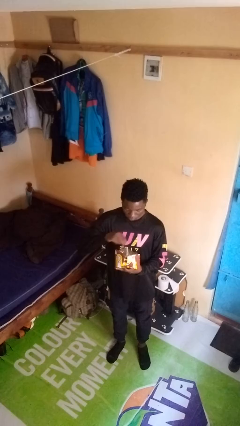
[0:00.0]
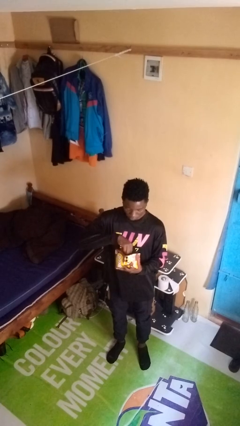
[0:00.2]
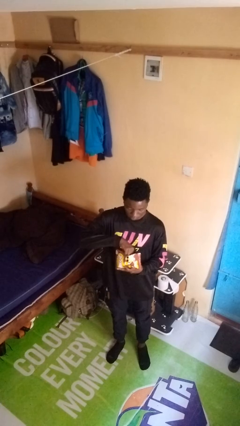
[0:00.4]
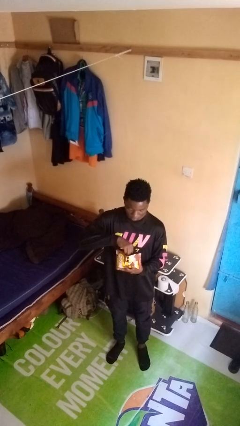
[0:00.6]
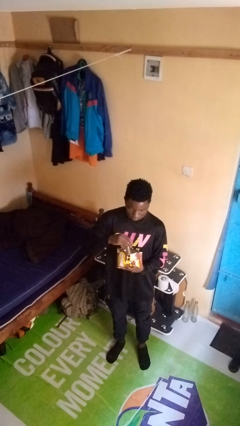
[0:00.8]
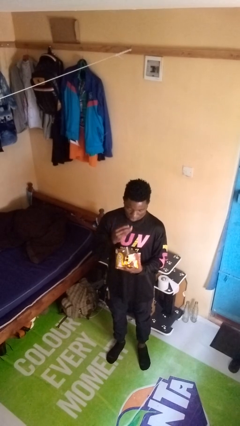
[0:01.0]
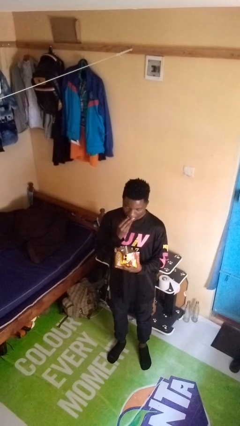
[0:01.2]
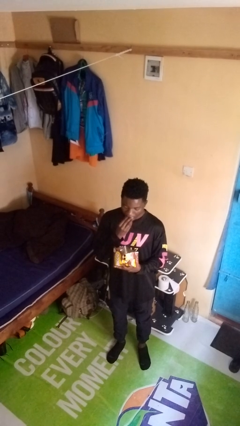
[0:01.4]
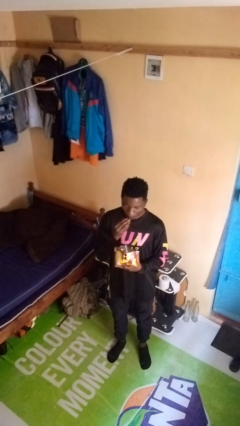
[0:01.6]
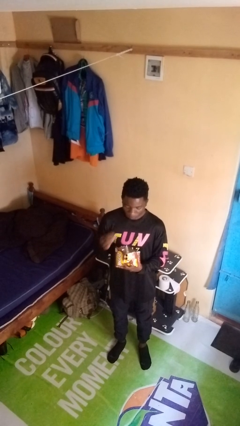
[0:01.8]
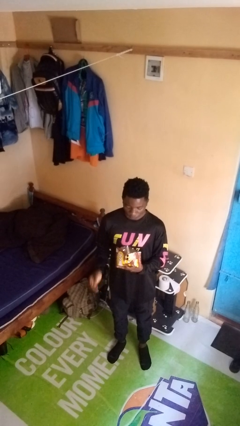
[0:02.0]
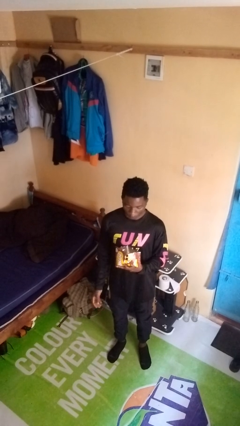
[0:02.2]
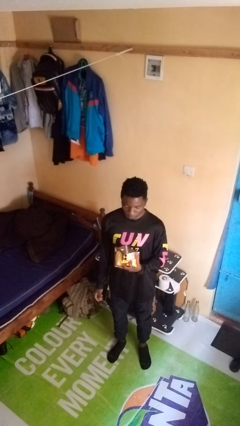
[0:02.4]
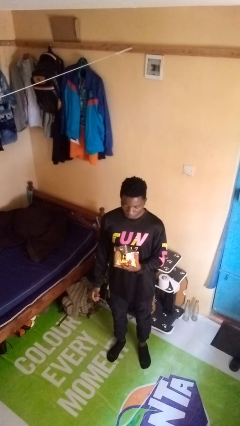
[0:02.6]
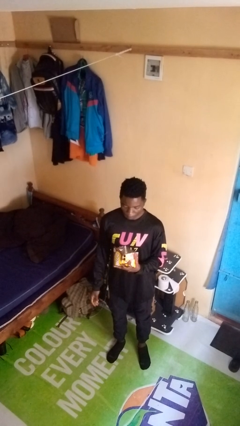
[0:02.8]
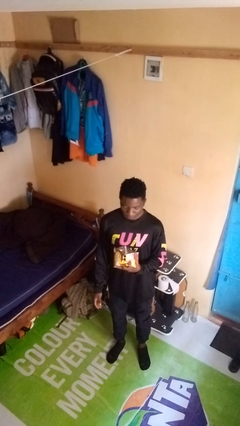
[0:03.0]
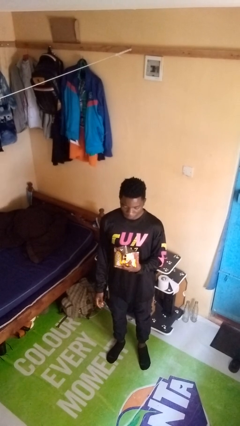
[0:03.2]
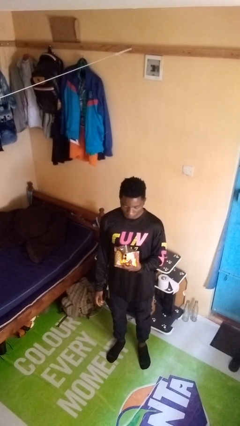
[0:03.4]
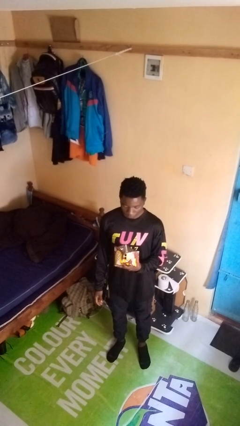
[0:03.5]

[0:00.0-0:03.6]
person eats snack from bag

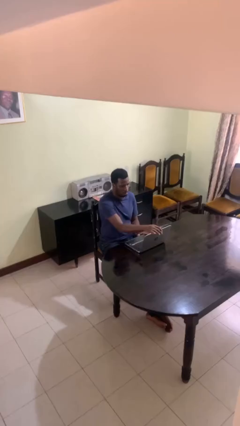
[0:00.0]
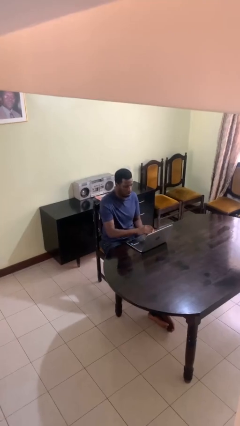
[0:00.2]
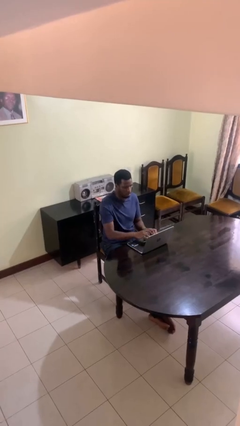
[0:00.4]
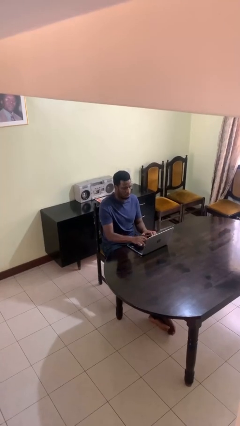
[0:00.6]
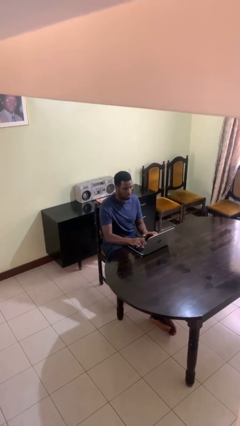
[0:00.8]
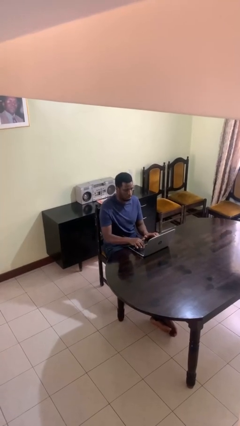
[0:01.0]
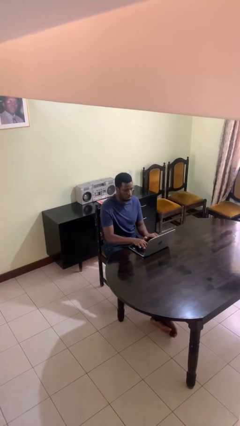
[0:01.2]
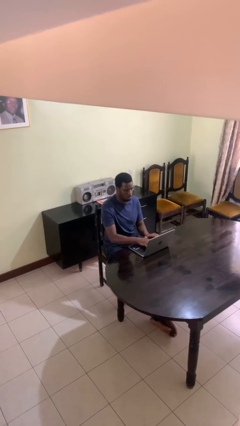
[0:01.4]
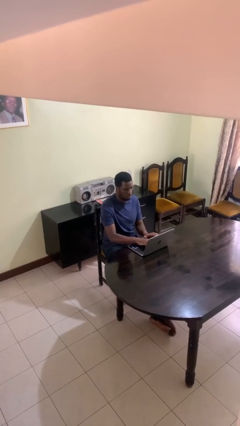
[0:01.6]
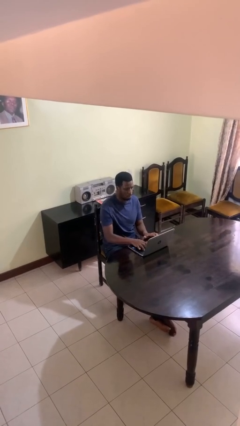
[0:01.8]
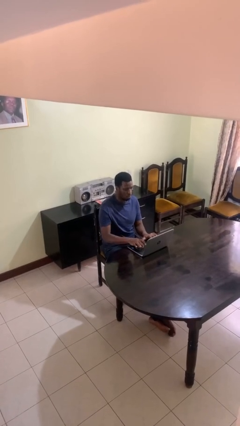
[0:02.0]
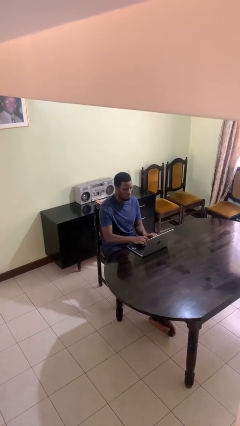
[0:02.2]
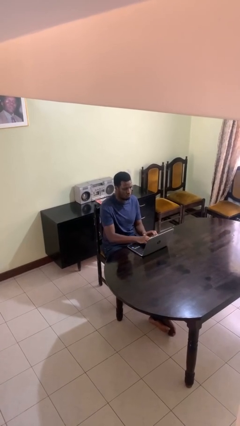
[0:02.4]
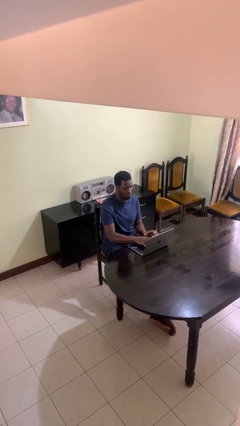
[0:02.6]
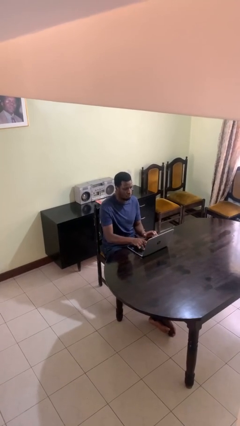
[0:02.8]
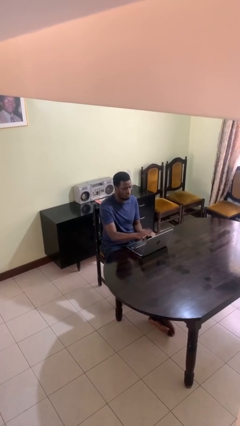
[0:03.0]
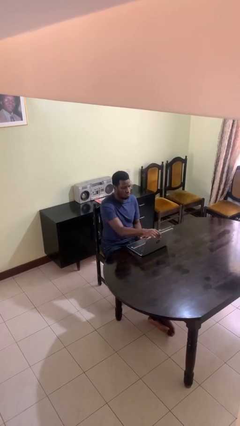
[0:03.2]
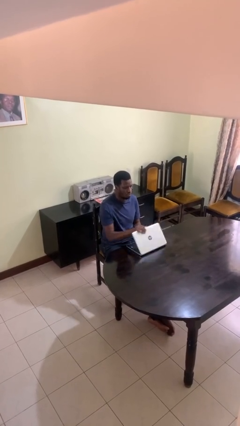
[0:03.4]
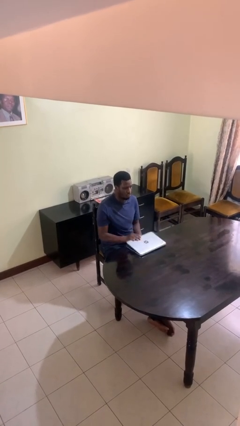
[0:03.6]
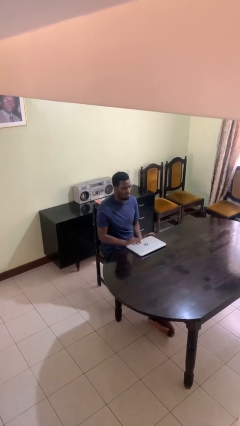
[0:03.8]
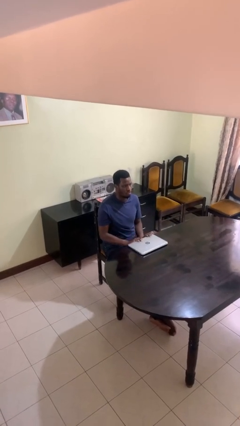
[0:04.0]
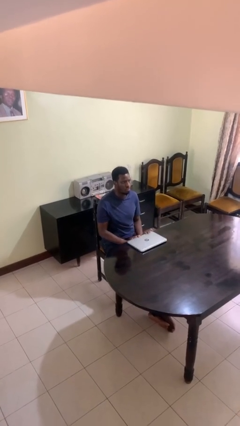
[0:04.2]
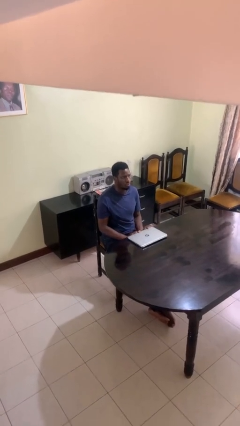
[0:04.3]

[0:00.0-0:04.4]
person interacts with laptop

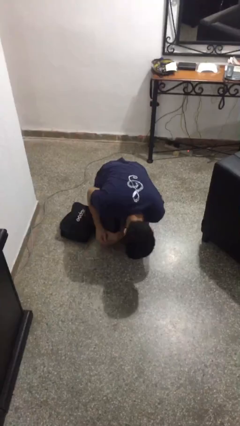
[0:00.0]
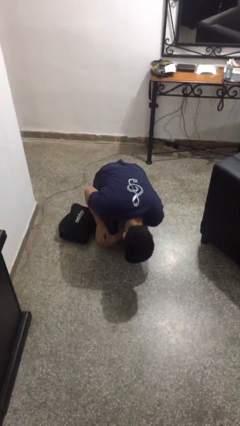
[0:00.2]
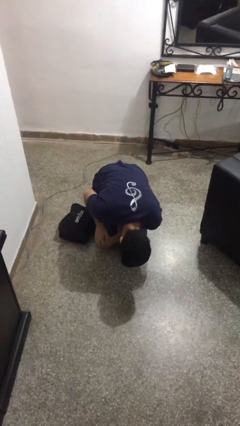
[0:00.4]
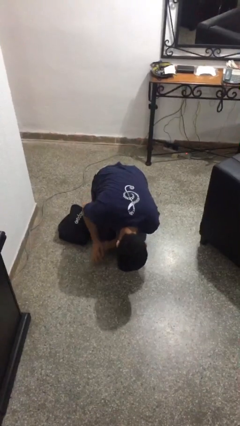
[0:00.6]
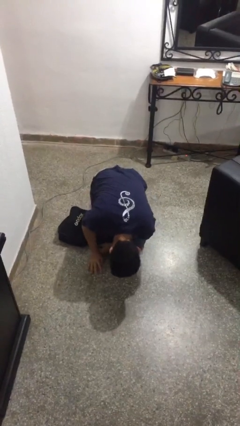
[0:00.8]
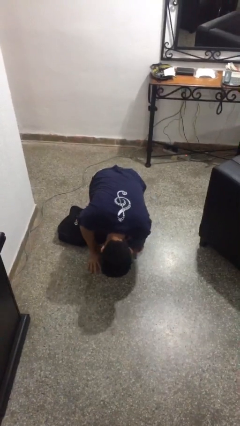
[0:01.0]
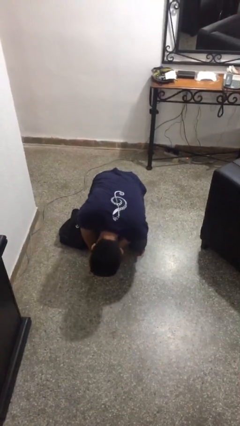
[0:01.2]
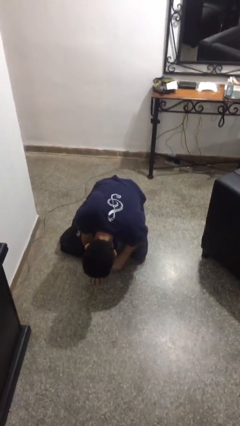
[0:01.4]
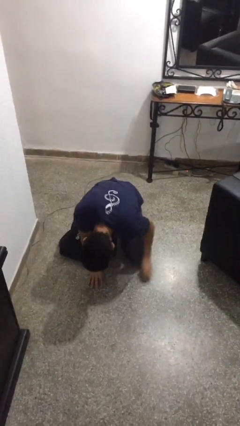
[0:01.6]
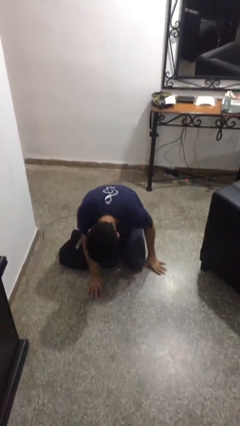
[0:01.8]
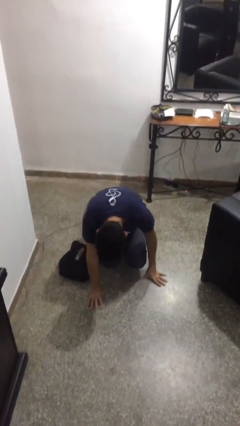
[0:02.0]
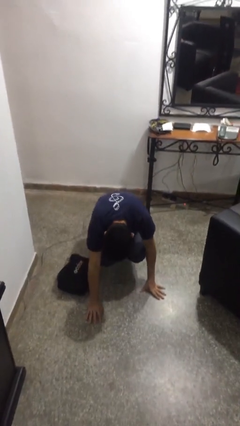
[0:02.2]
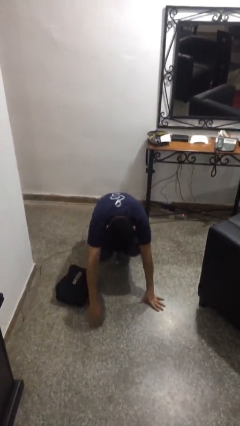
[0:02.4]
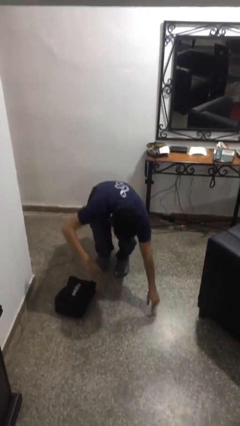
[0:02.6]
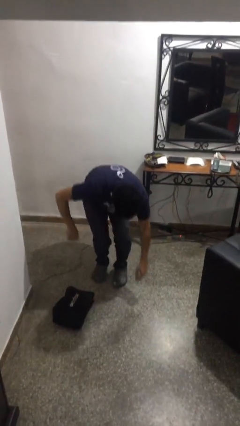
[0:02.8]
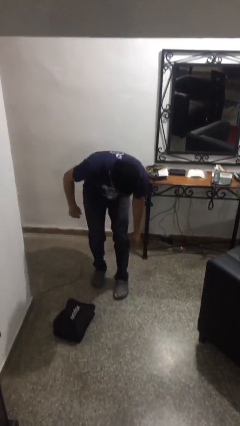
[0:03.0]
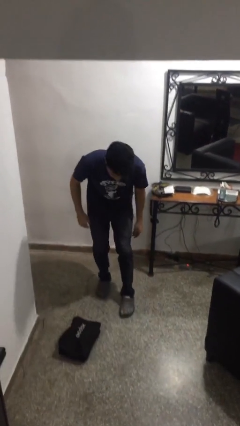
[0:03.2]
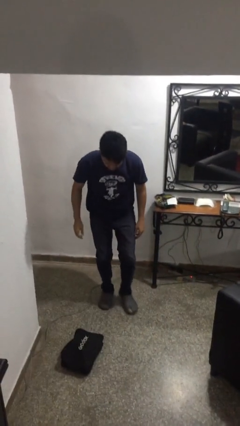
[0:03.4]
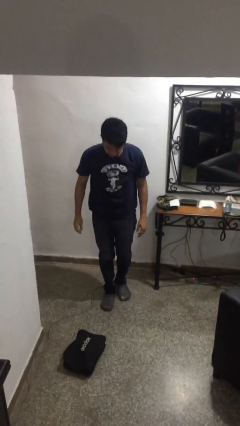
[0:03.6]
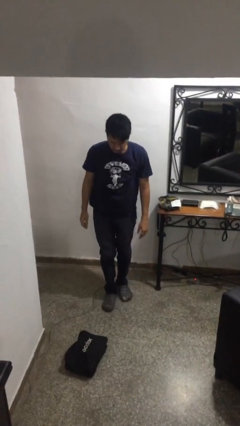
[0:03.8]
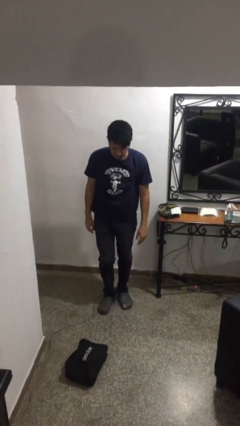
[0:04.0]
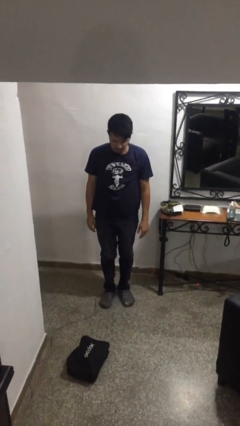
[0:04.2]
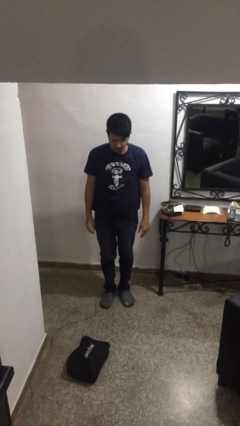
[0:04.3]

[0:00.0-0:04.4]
person stands up from floor

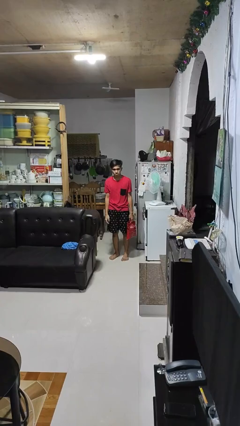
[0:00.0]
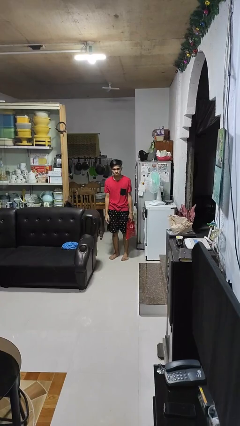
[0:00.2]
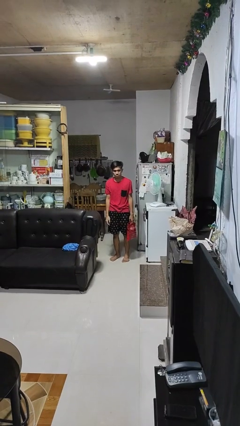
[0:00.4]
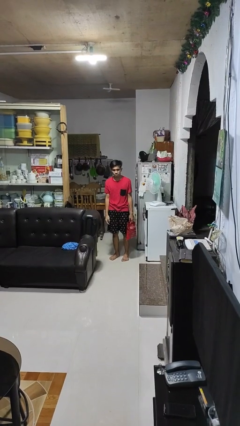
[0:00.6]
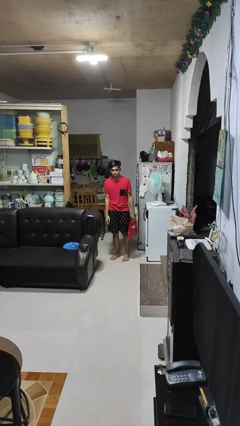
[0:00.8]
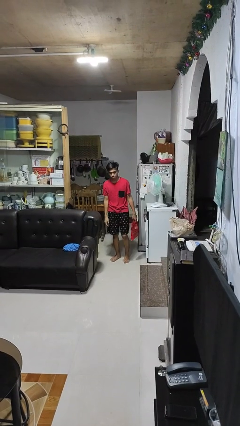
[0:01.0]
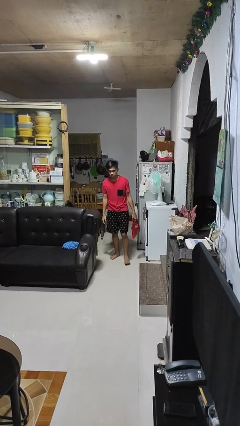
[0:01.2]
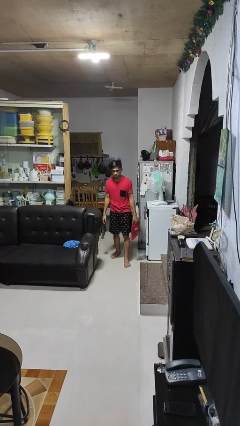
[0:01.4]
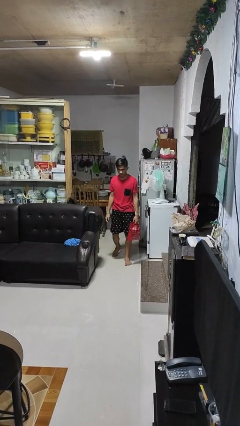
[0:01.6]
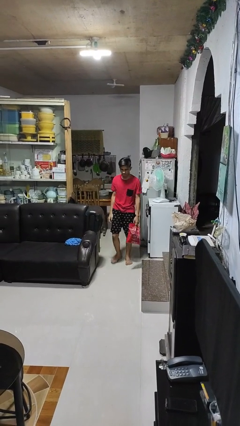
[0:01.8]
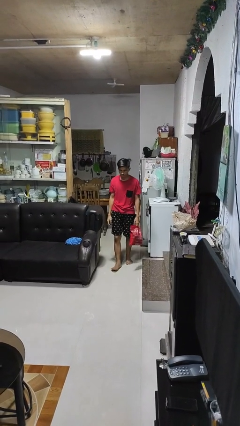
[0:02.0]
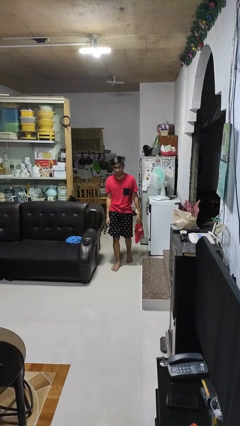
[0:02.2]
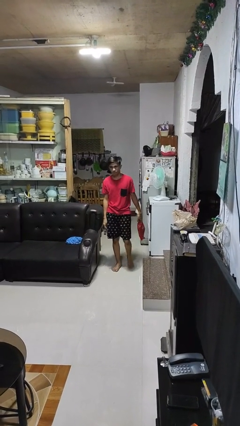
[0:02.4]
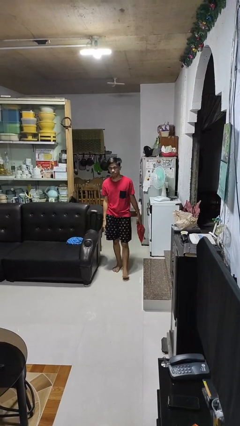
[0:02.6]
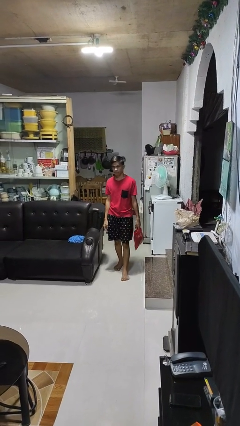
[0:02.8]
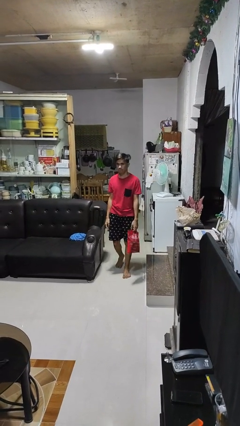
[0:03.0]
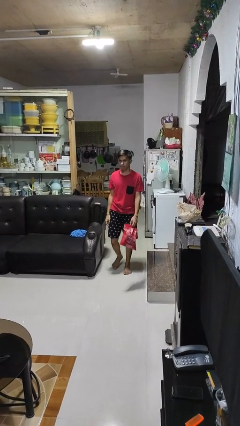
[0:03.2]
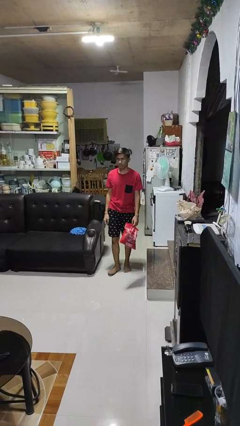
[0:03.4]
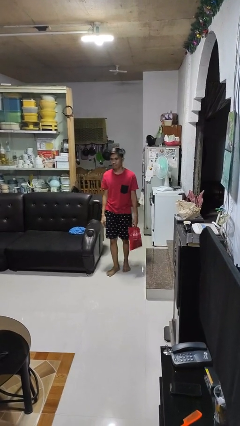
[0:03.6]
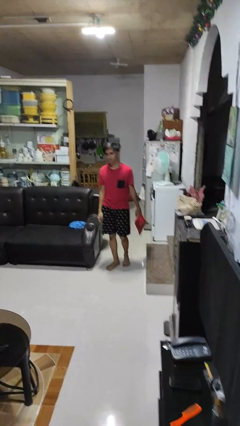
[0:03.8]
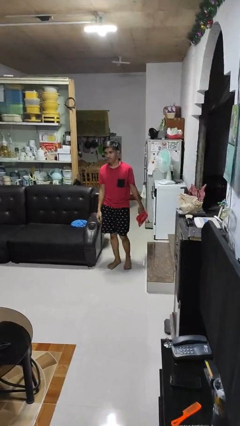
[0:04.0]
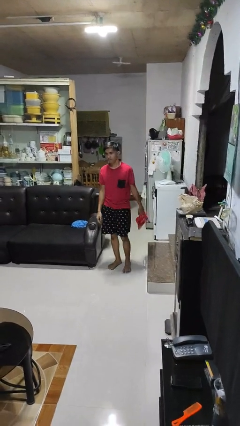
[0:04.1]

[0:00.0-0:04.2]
person carries groceries

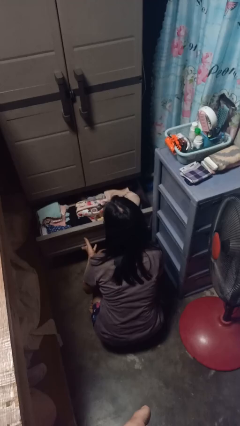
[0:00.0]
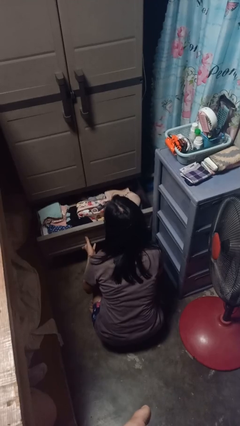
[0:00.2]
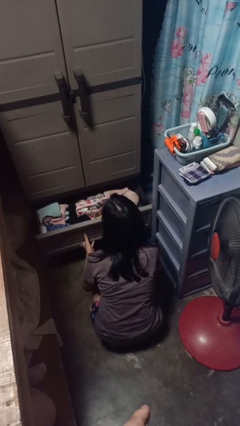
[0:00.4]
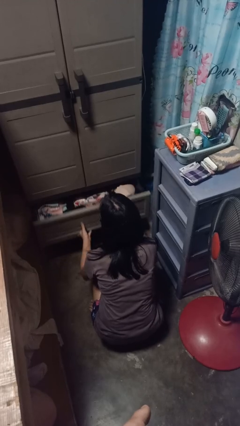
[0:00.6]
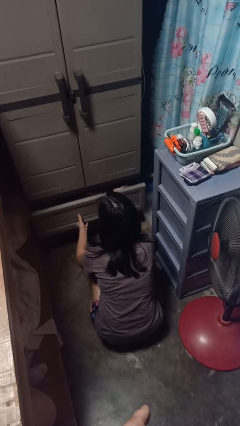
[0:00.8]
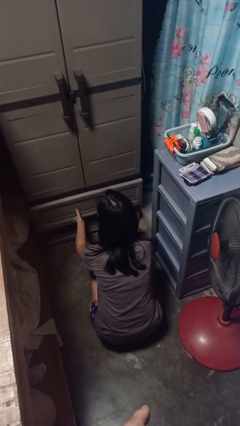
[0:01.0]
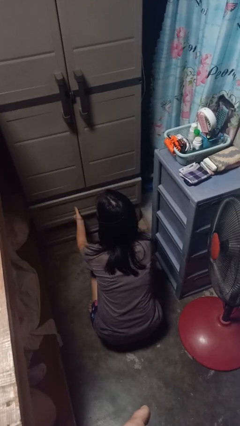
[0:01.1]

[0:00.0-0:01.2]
person closes dresser drawer
